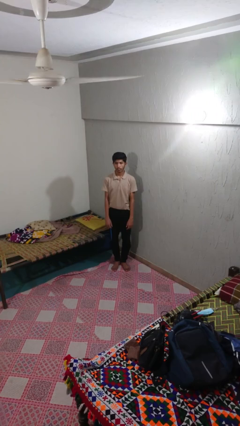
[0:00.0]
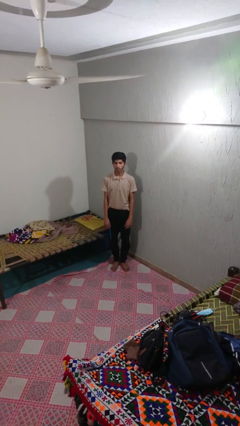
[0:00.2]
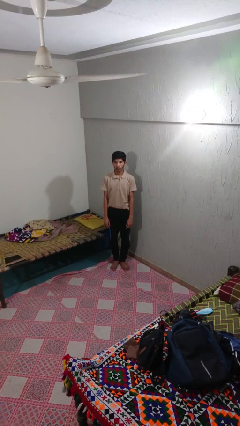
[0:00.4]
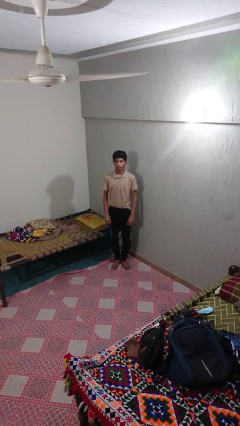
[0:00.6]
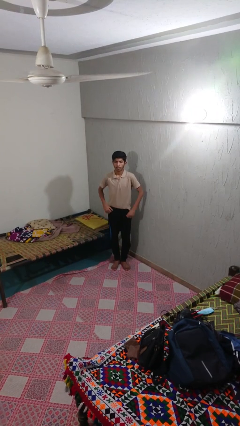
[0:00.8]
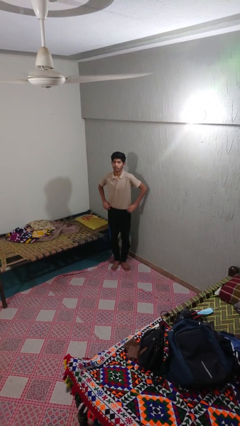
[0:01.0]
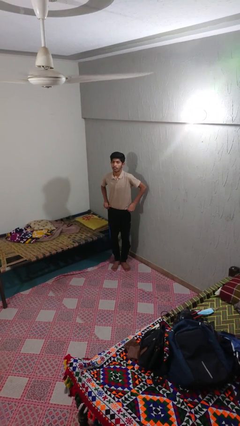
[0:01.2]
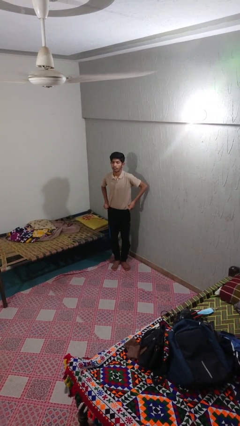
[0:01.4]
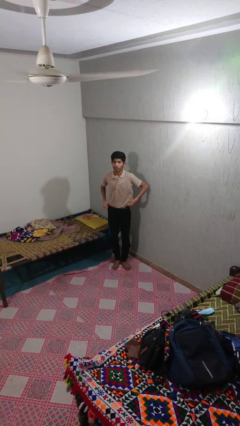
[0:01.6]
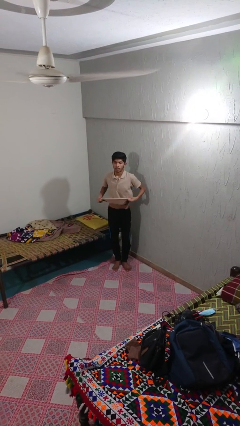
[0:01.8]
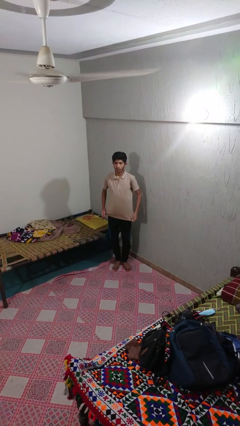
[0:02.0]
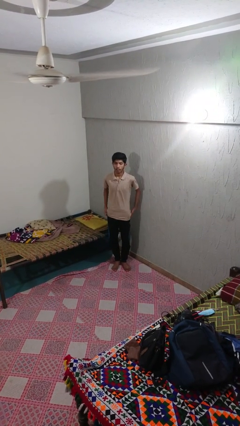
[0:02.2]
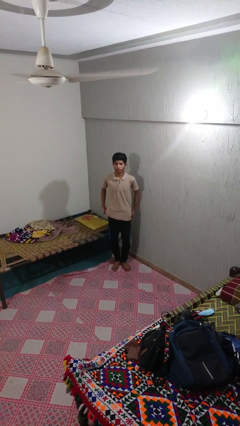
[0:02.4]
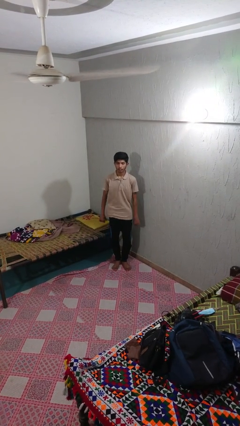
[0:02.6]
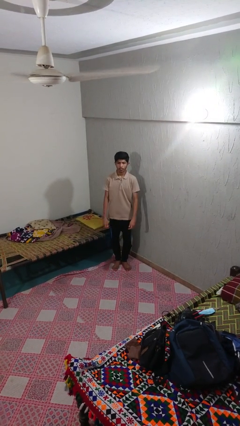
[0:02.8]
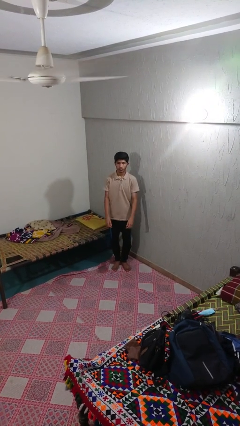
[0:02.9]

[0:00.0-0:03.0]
person untucks shirt

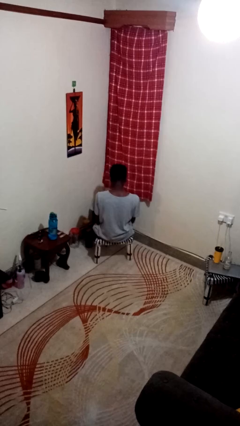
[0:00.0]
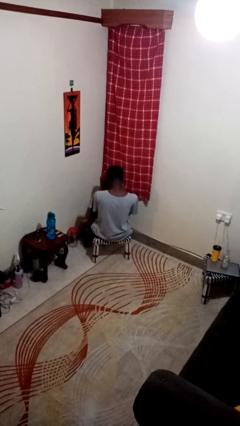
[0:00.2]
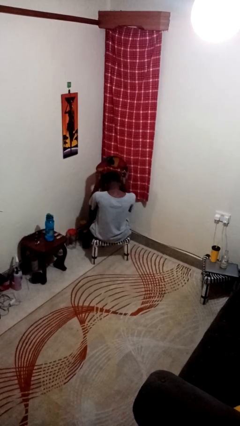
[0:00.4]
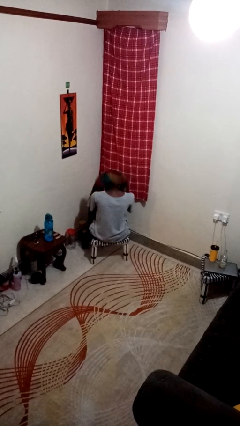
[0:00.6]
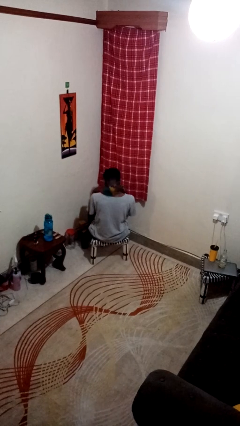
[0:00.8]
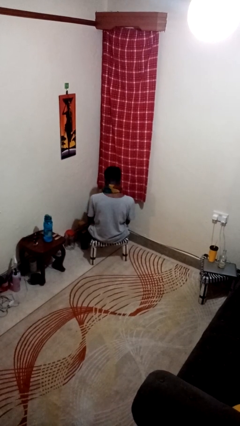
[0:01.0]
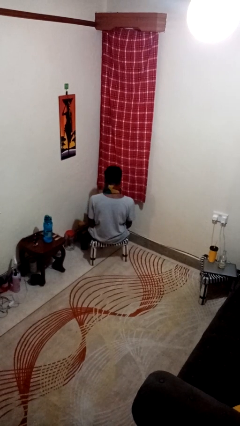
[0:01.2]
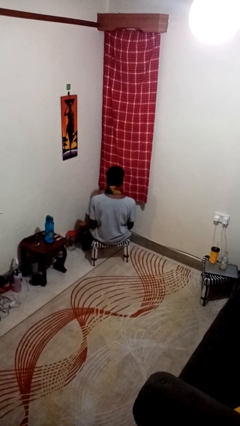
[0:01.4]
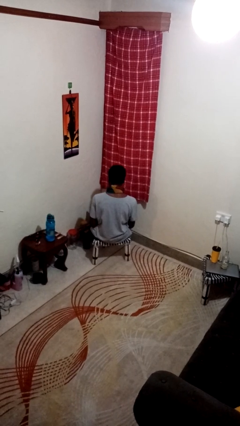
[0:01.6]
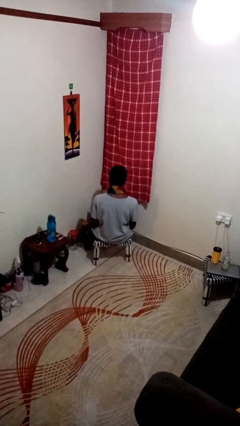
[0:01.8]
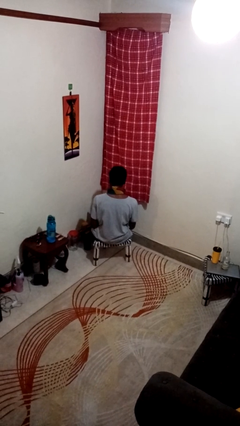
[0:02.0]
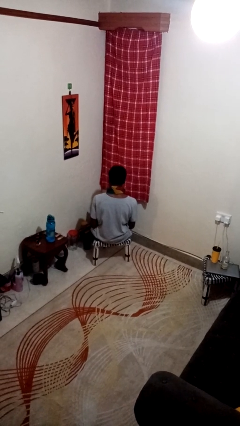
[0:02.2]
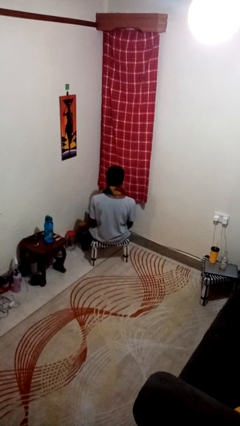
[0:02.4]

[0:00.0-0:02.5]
person puts on scarf

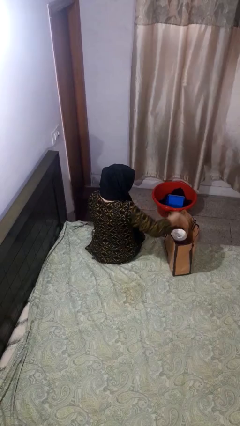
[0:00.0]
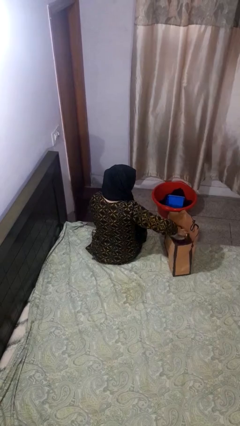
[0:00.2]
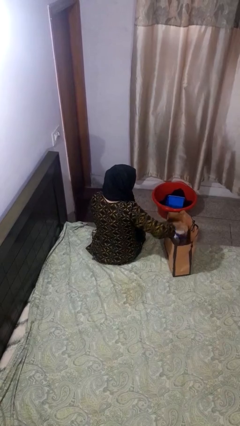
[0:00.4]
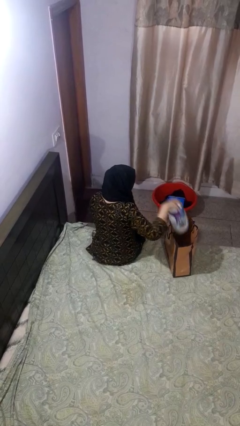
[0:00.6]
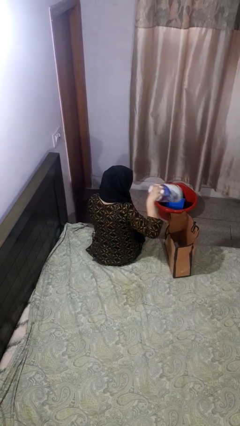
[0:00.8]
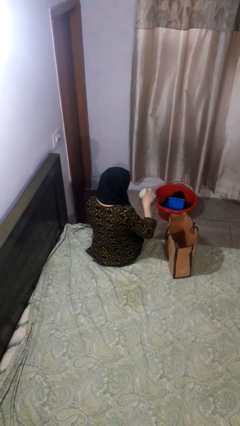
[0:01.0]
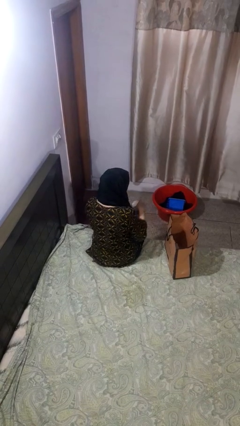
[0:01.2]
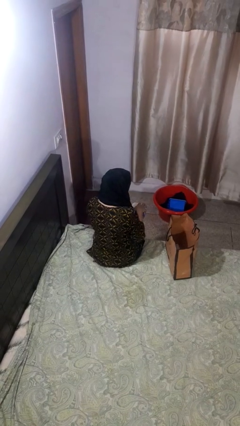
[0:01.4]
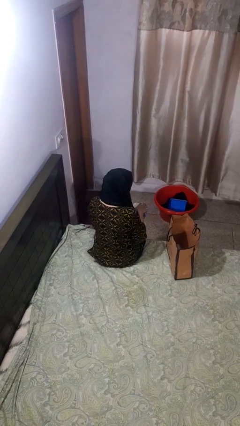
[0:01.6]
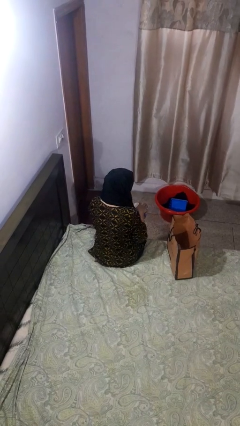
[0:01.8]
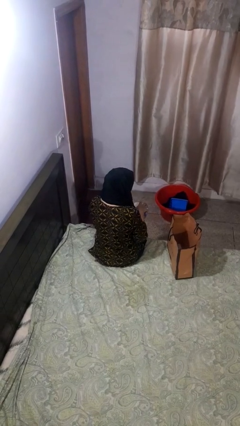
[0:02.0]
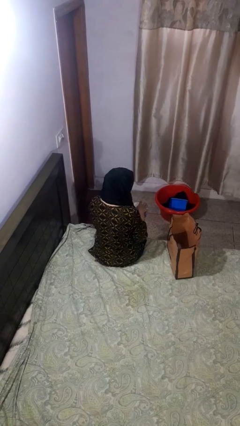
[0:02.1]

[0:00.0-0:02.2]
person takes object from bag

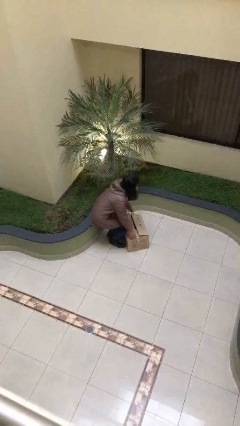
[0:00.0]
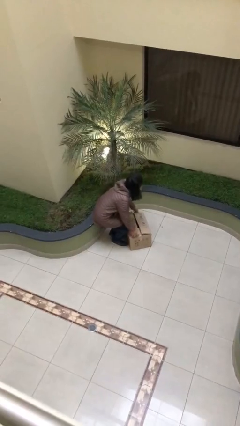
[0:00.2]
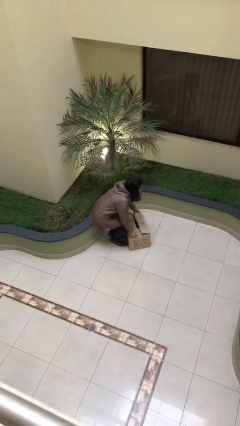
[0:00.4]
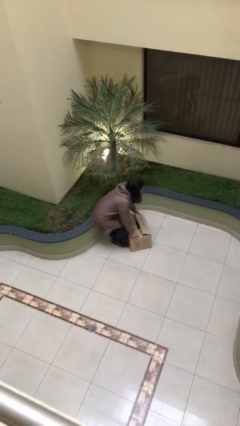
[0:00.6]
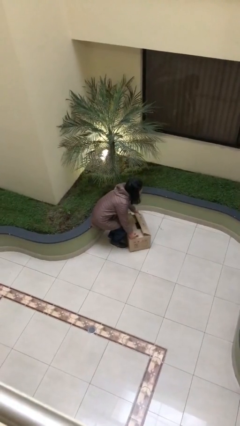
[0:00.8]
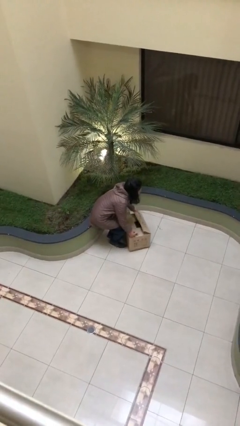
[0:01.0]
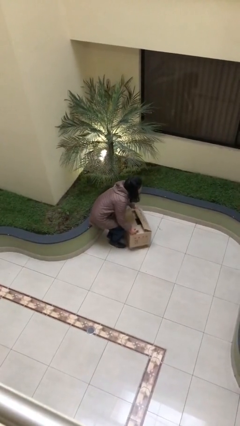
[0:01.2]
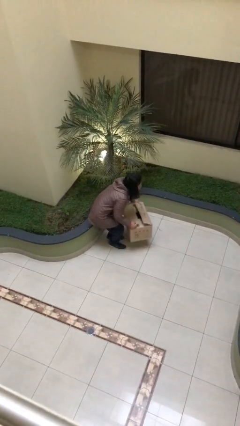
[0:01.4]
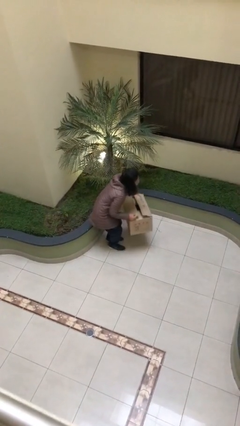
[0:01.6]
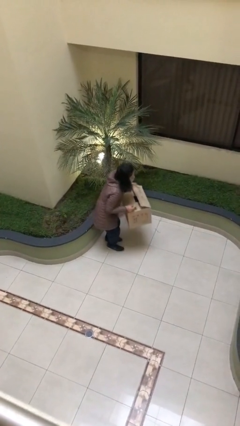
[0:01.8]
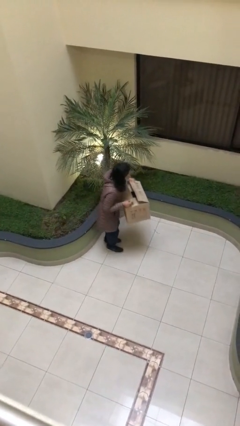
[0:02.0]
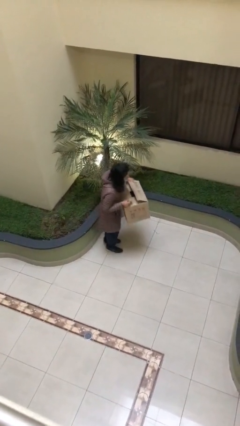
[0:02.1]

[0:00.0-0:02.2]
person picks up object from floor

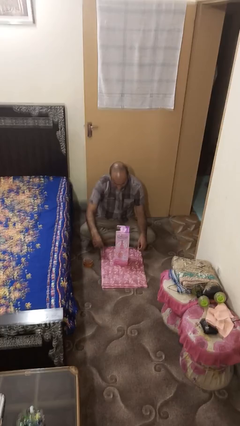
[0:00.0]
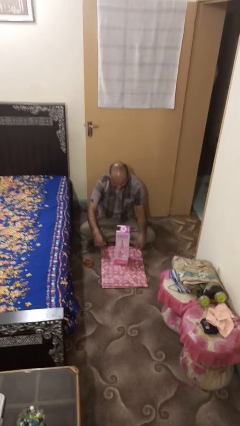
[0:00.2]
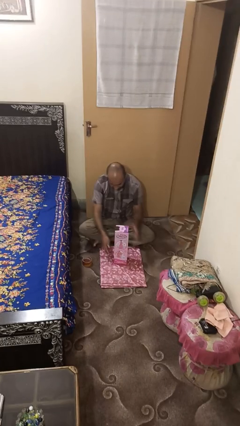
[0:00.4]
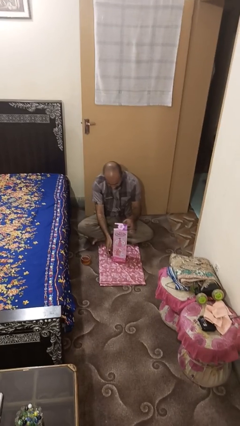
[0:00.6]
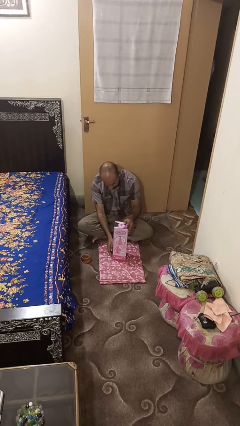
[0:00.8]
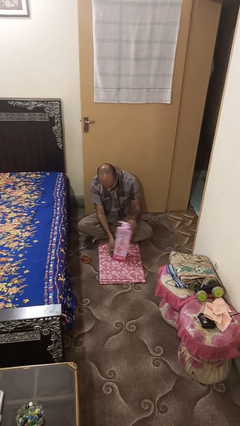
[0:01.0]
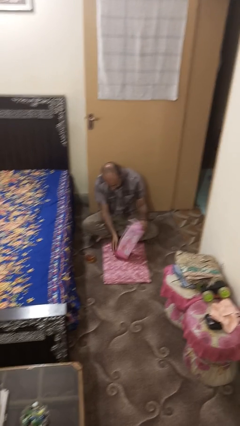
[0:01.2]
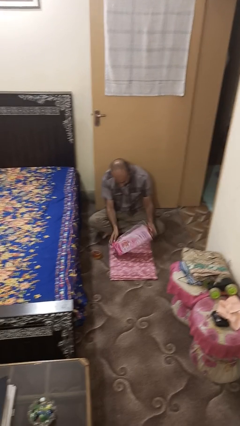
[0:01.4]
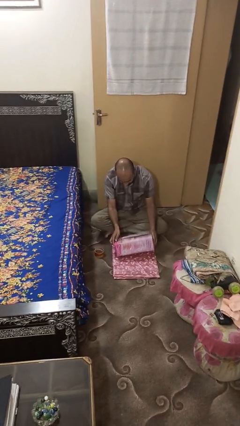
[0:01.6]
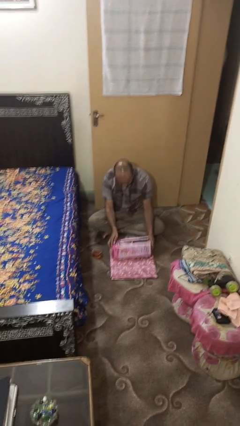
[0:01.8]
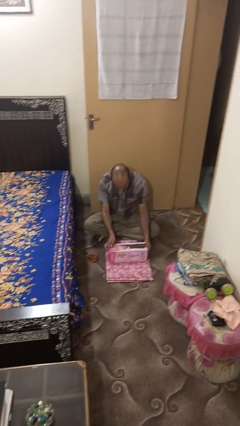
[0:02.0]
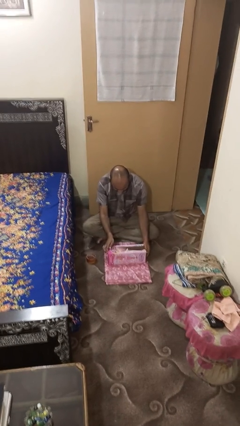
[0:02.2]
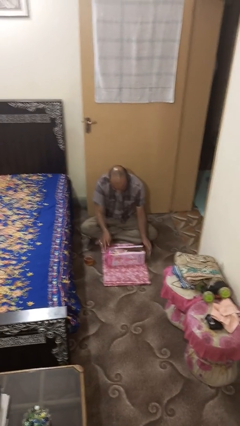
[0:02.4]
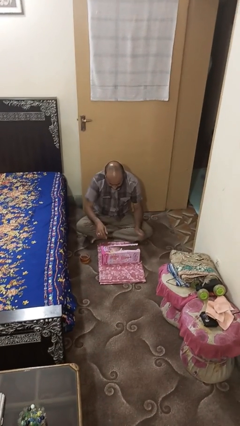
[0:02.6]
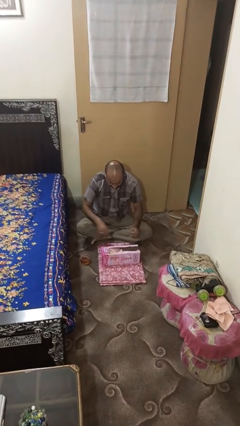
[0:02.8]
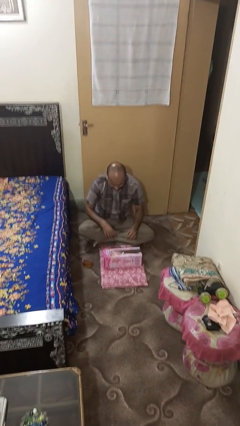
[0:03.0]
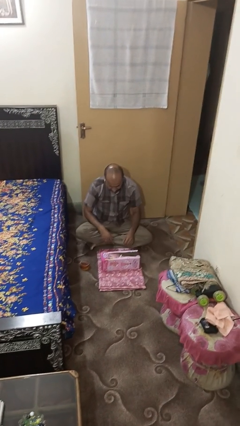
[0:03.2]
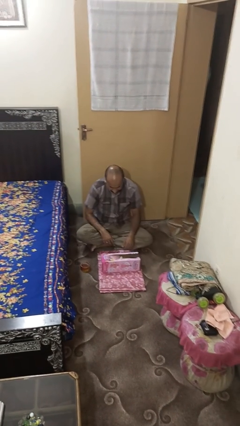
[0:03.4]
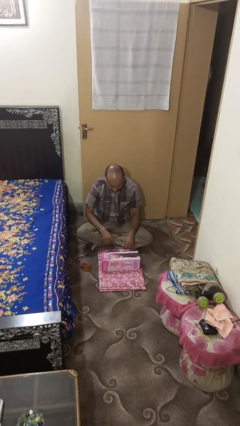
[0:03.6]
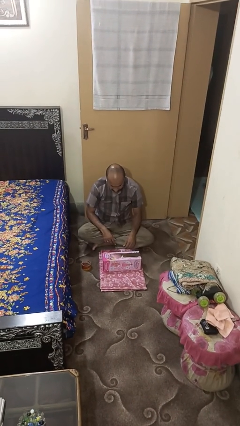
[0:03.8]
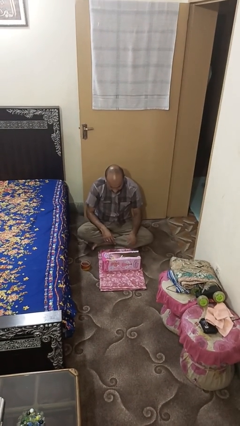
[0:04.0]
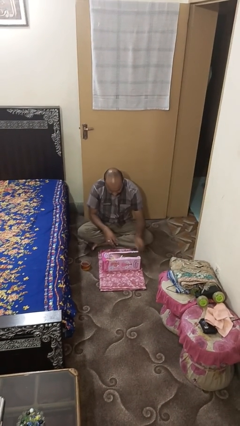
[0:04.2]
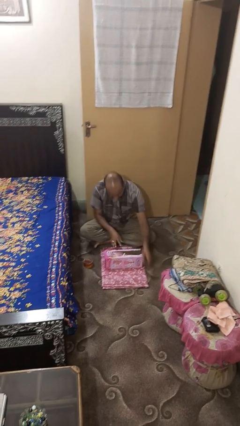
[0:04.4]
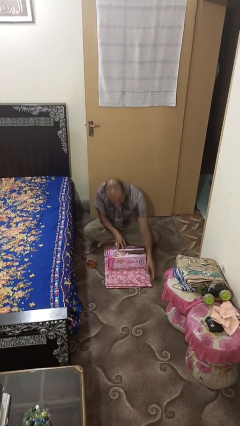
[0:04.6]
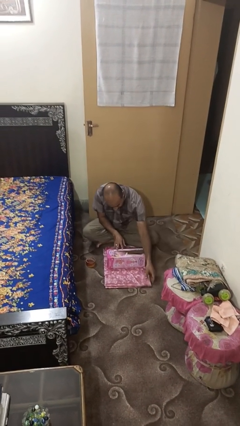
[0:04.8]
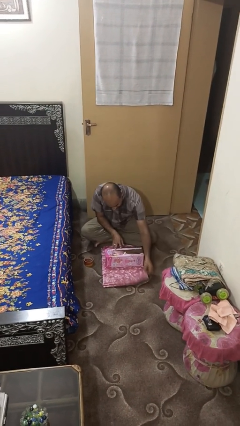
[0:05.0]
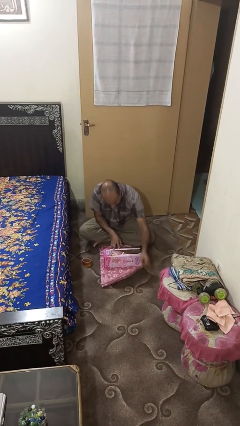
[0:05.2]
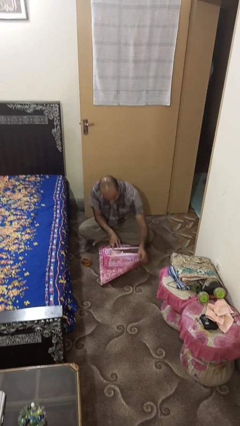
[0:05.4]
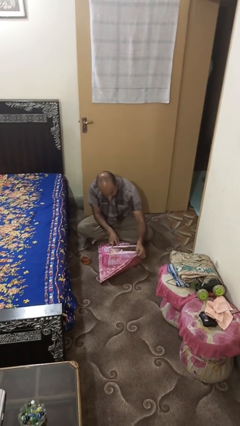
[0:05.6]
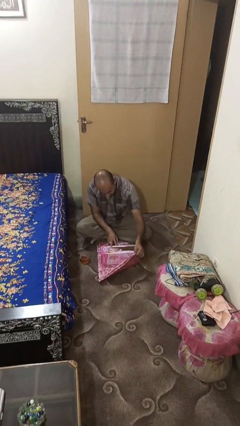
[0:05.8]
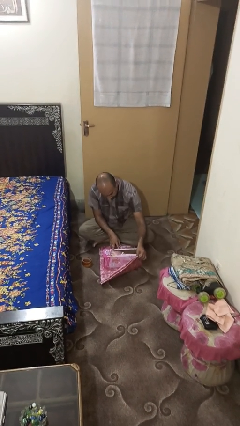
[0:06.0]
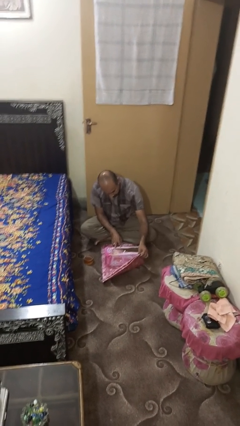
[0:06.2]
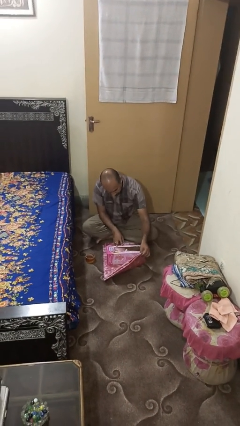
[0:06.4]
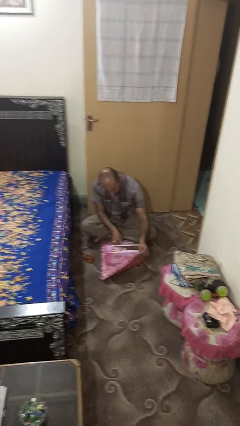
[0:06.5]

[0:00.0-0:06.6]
person wraps box

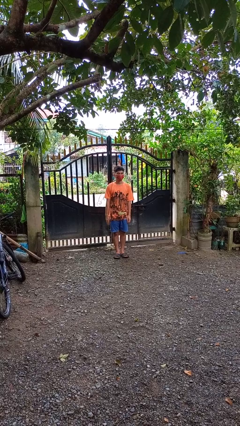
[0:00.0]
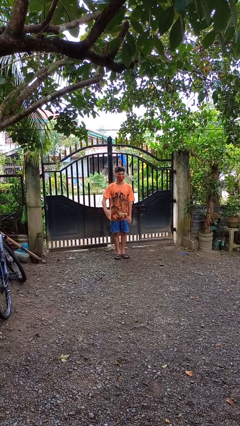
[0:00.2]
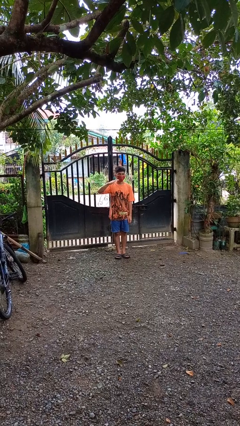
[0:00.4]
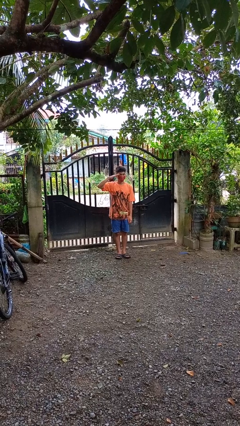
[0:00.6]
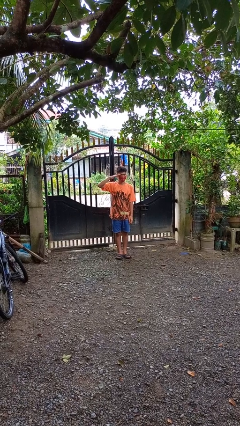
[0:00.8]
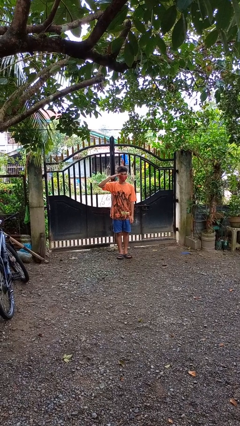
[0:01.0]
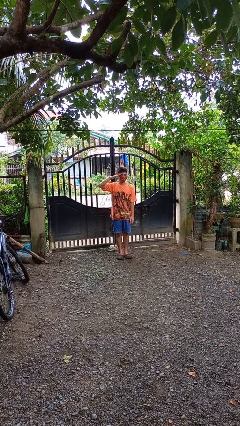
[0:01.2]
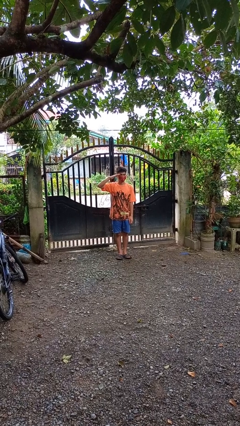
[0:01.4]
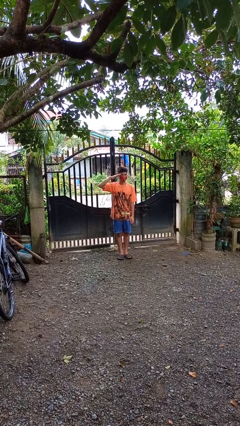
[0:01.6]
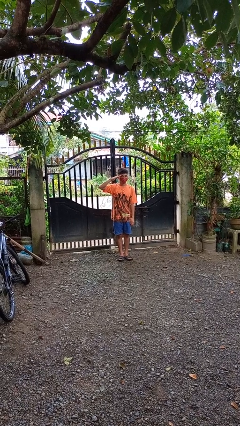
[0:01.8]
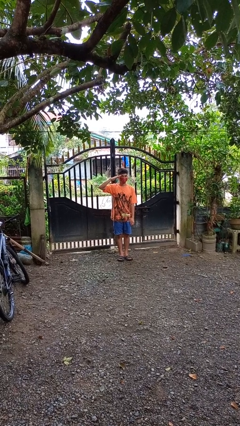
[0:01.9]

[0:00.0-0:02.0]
person salutes
